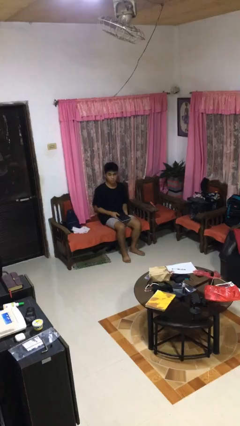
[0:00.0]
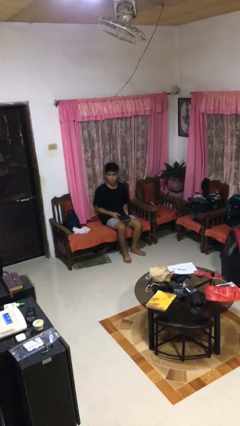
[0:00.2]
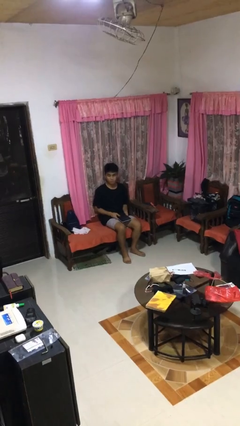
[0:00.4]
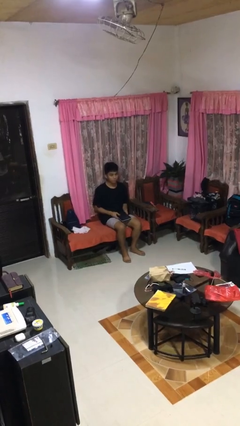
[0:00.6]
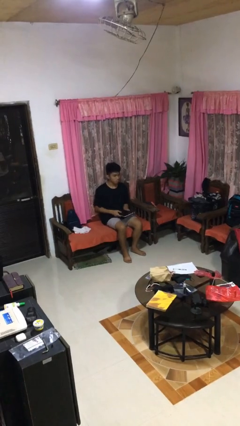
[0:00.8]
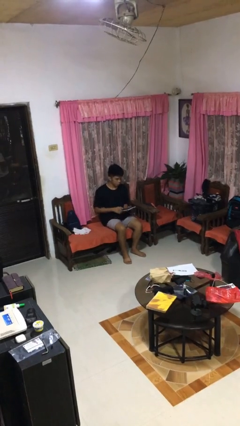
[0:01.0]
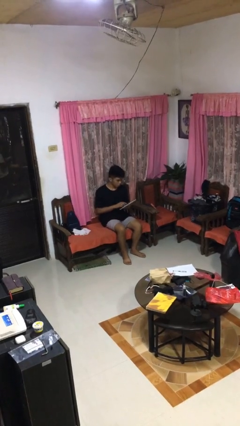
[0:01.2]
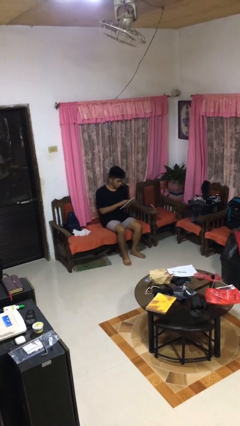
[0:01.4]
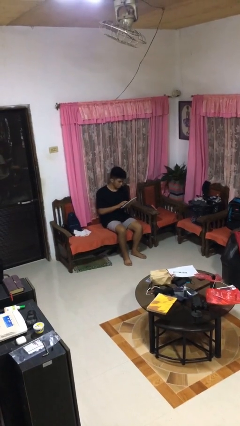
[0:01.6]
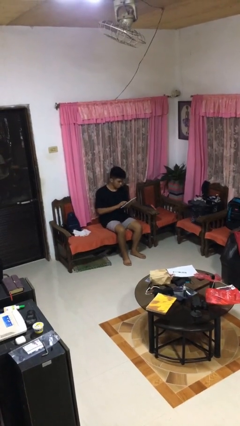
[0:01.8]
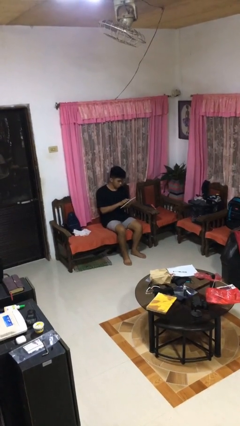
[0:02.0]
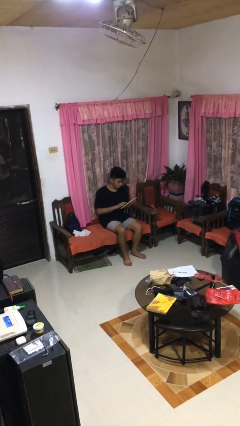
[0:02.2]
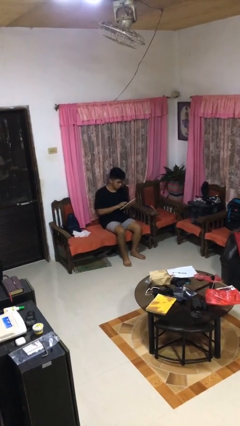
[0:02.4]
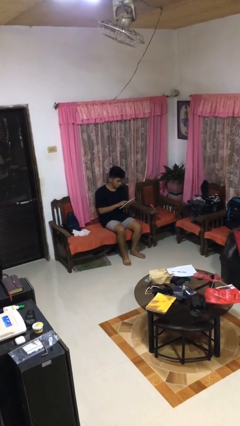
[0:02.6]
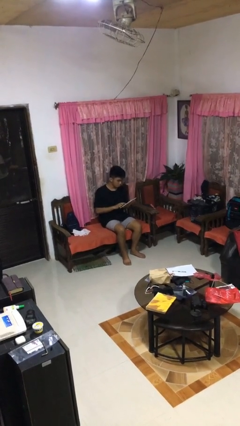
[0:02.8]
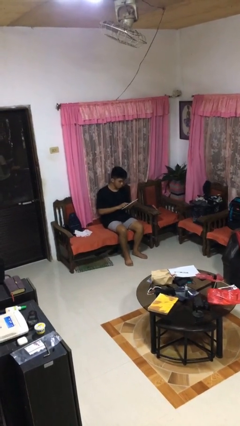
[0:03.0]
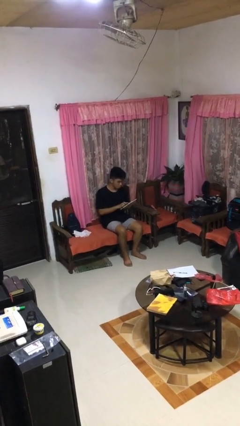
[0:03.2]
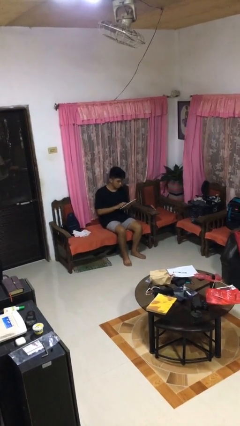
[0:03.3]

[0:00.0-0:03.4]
person interacts with tablet

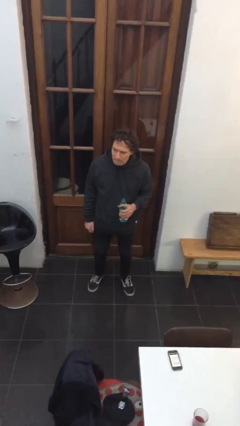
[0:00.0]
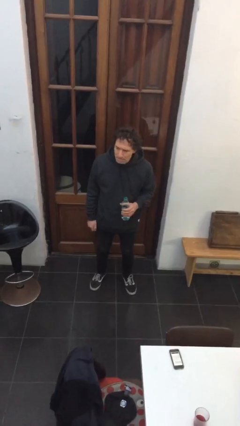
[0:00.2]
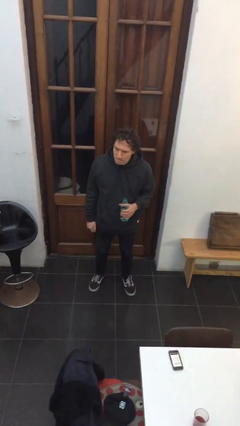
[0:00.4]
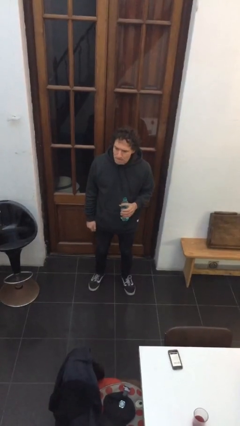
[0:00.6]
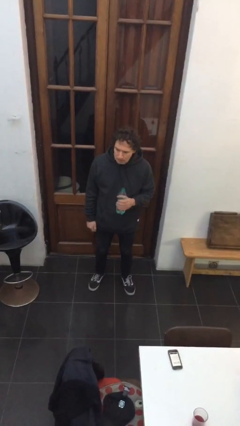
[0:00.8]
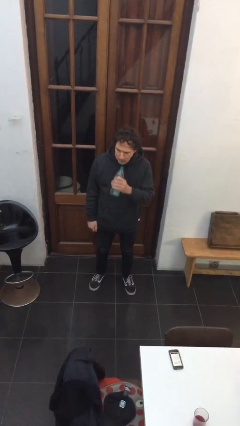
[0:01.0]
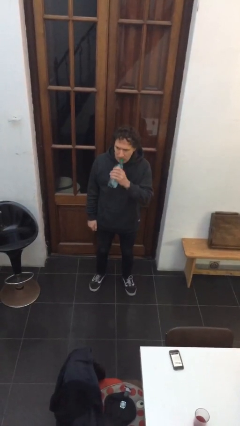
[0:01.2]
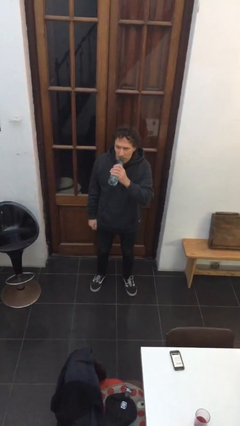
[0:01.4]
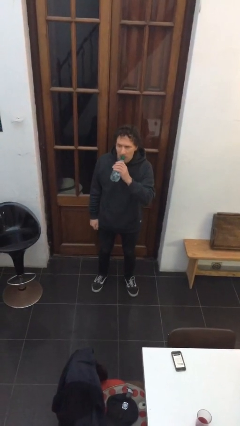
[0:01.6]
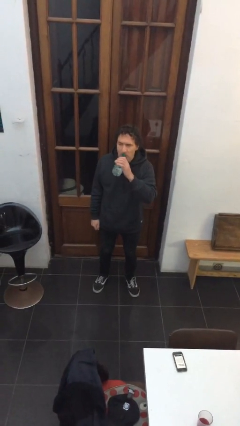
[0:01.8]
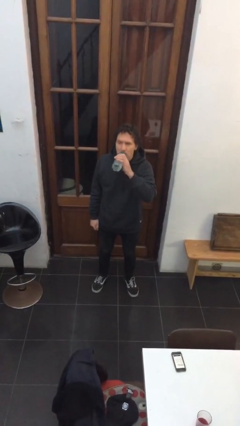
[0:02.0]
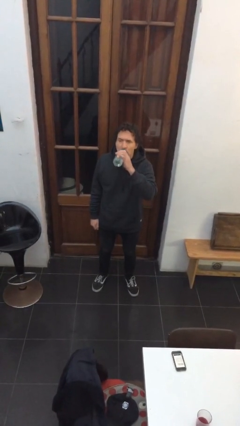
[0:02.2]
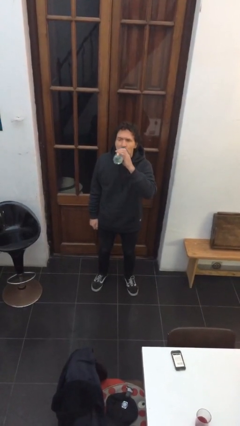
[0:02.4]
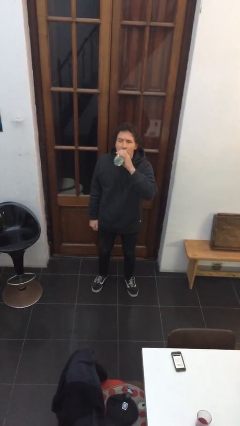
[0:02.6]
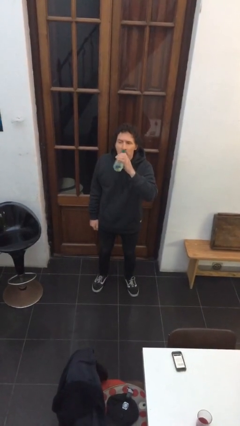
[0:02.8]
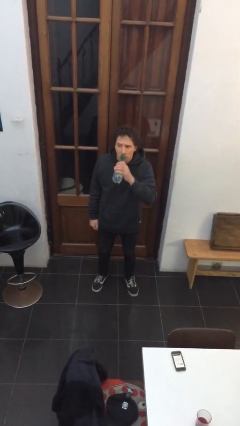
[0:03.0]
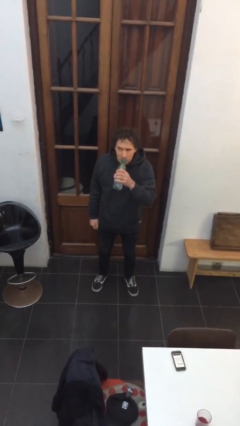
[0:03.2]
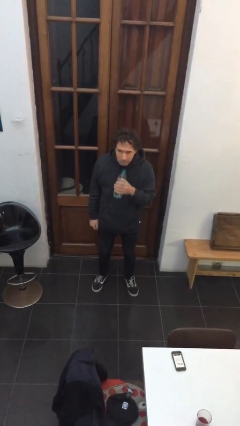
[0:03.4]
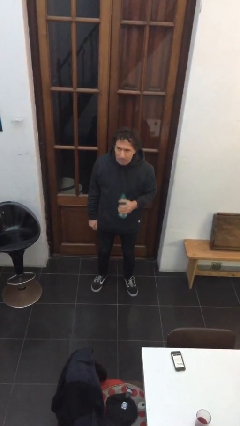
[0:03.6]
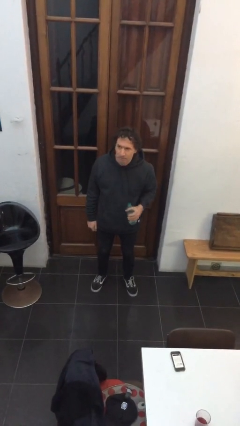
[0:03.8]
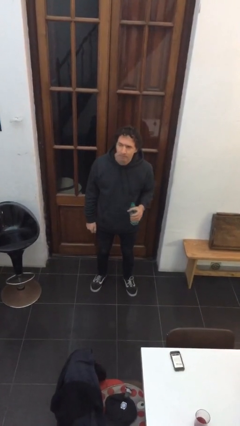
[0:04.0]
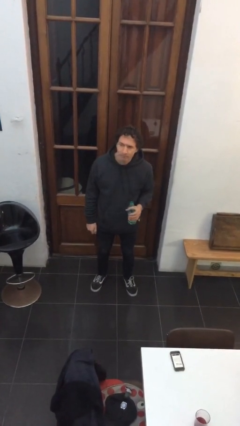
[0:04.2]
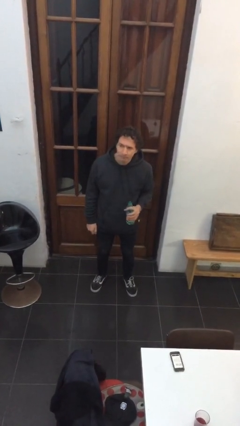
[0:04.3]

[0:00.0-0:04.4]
person drinks from bottle

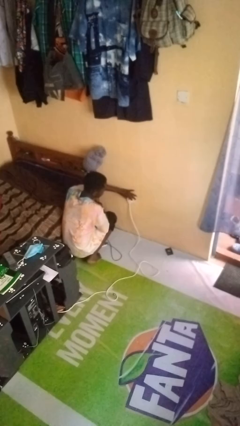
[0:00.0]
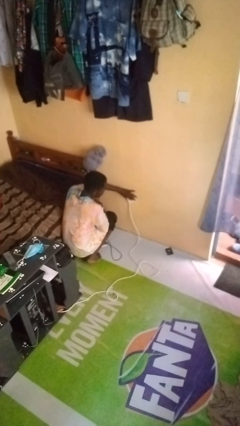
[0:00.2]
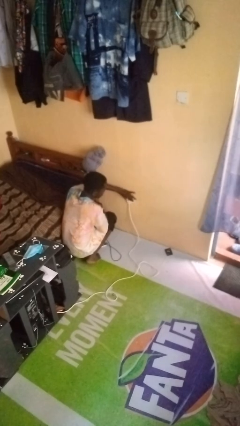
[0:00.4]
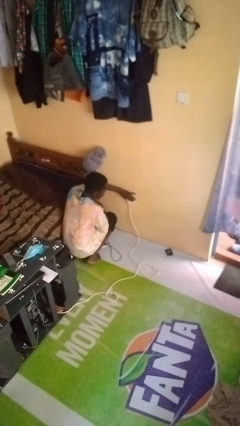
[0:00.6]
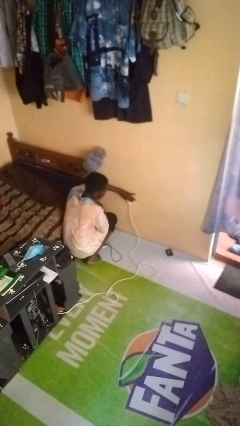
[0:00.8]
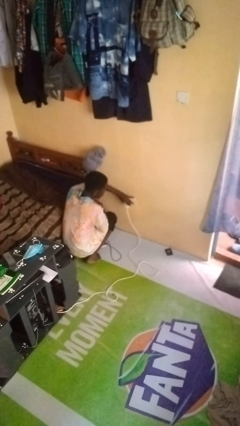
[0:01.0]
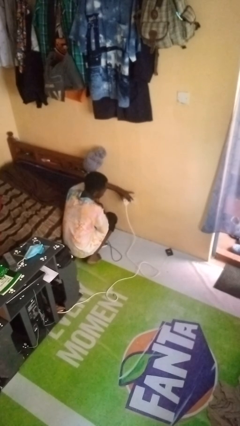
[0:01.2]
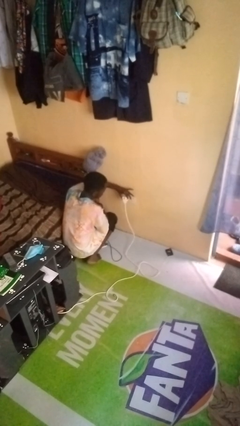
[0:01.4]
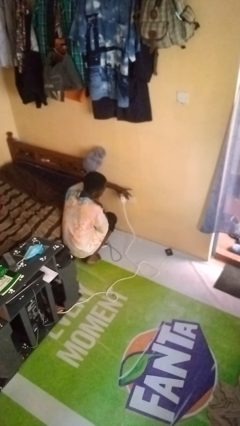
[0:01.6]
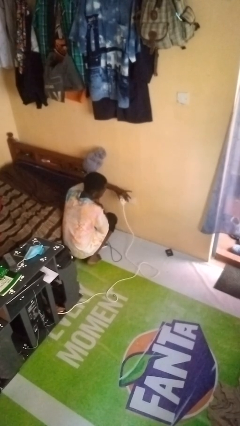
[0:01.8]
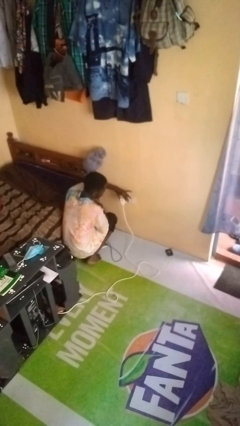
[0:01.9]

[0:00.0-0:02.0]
person unplugs from electrical socket

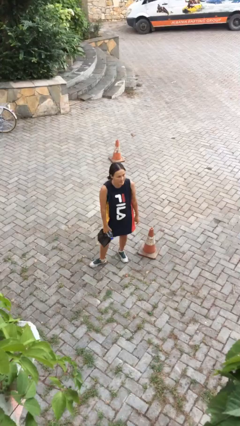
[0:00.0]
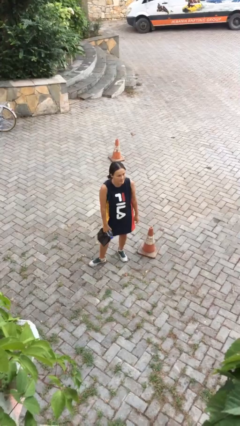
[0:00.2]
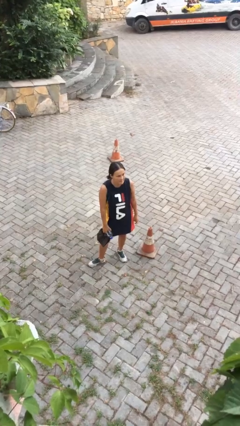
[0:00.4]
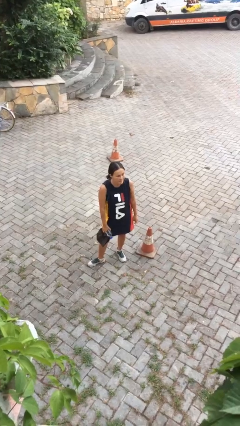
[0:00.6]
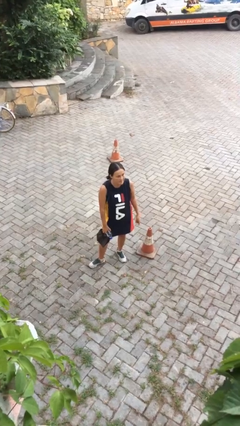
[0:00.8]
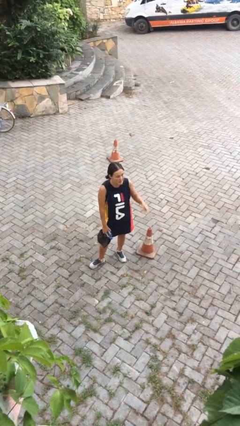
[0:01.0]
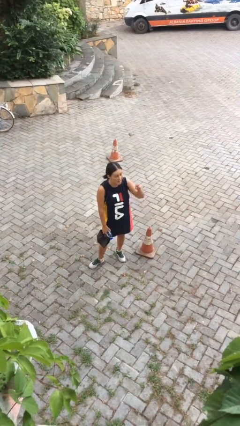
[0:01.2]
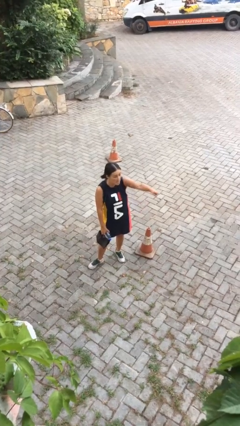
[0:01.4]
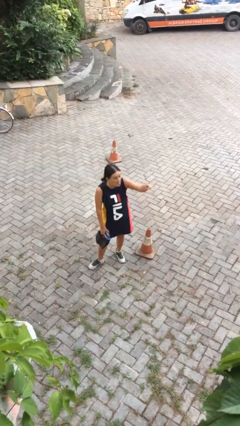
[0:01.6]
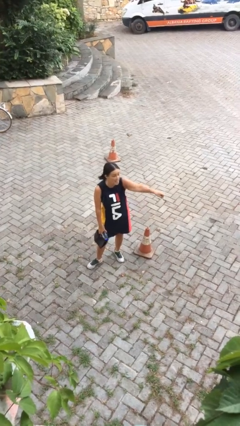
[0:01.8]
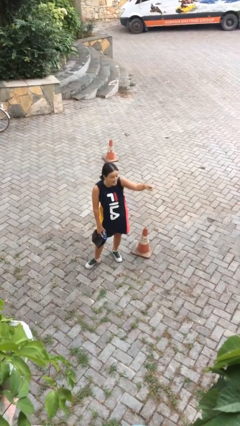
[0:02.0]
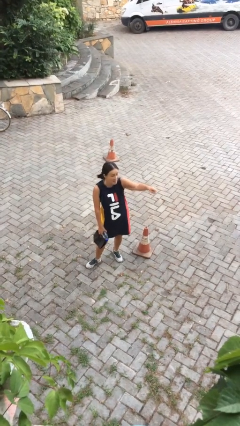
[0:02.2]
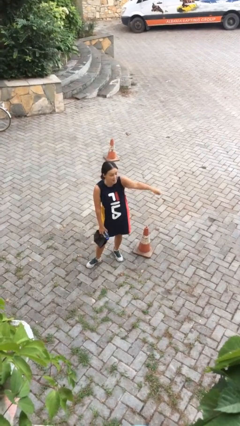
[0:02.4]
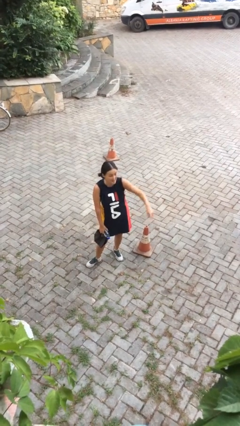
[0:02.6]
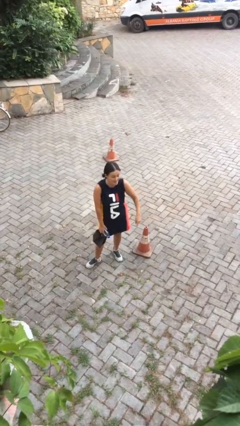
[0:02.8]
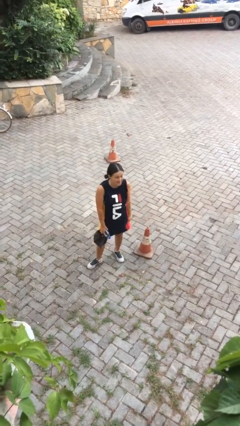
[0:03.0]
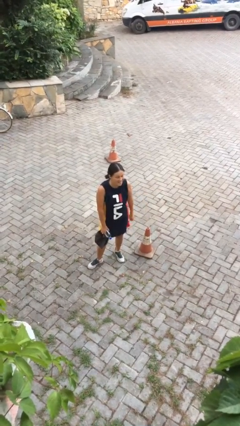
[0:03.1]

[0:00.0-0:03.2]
person points at person

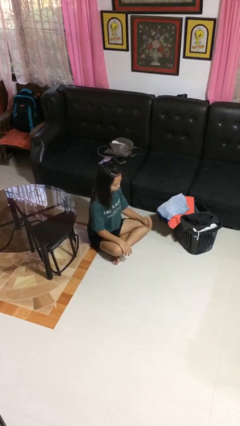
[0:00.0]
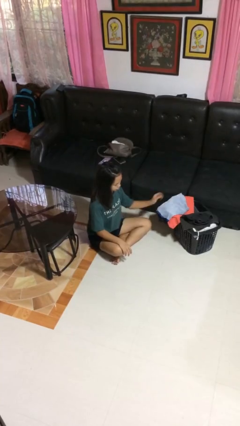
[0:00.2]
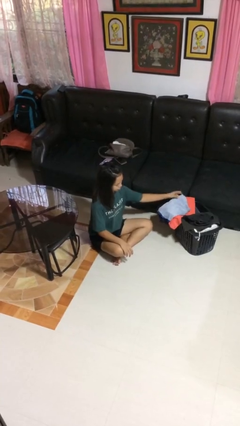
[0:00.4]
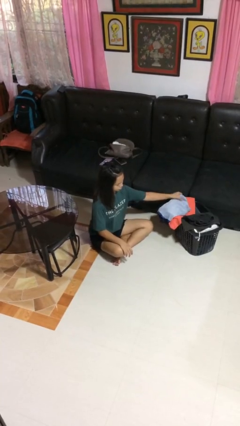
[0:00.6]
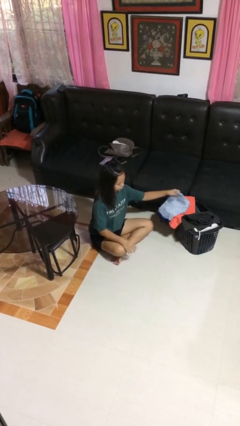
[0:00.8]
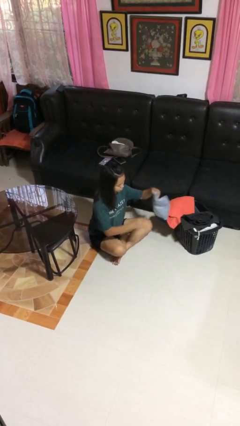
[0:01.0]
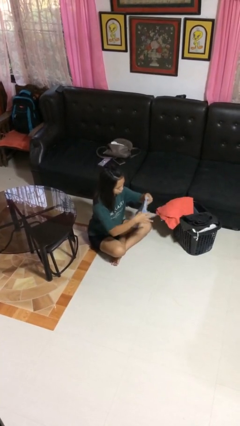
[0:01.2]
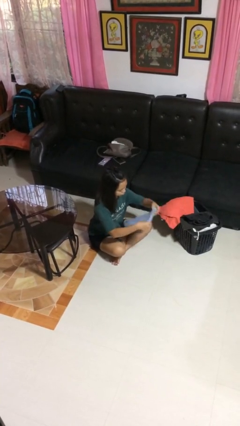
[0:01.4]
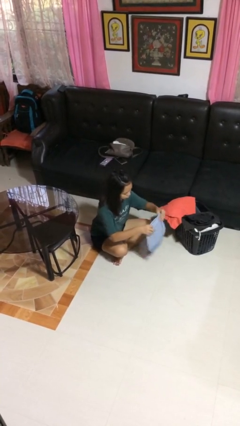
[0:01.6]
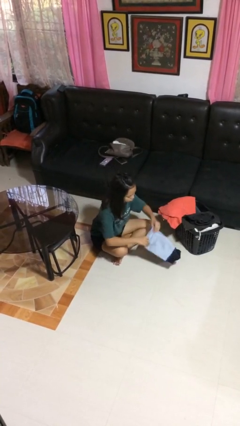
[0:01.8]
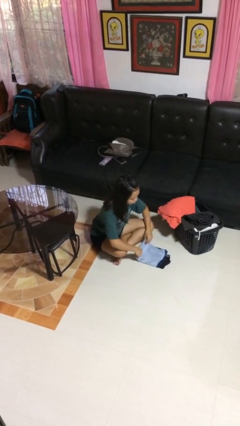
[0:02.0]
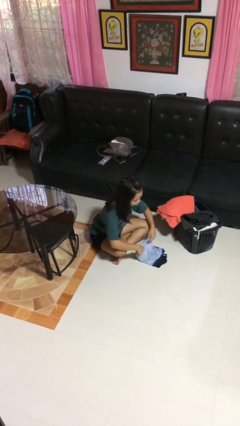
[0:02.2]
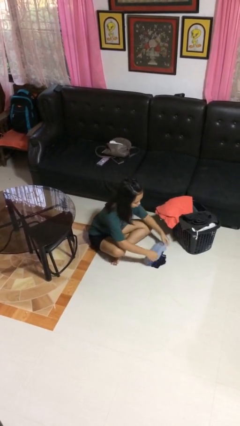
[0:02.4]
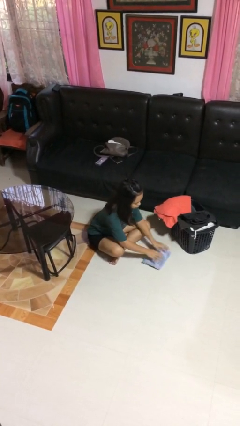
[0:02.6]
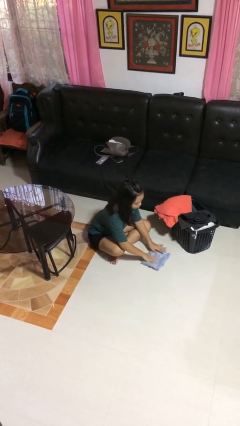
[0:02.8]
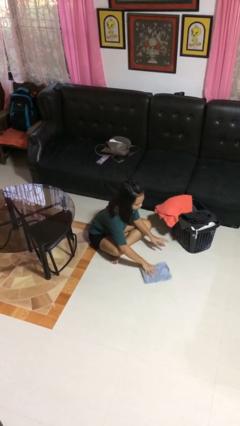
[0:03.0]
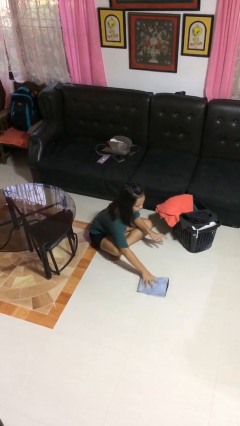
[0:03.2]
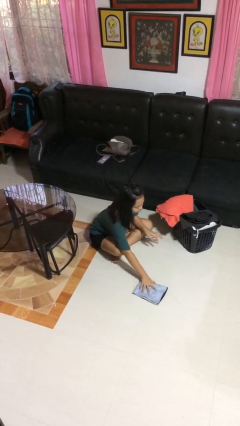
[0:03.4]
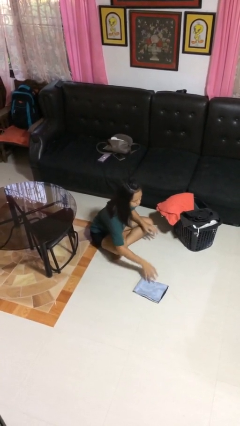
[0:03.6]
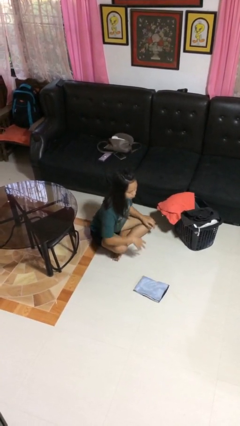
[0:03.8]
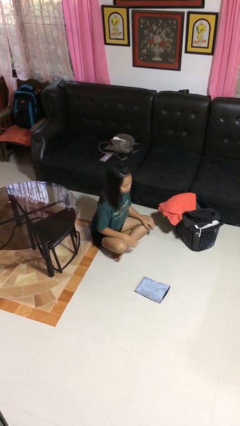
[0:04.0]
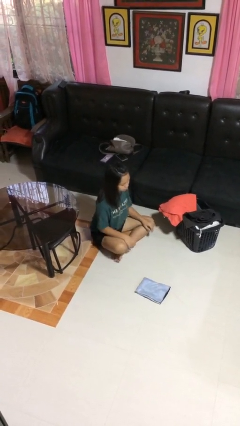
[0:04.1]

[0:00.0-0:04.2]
person folds shirt

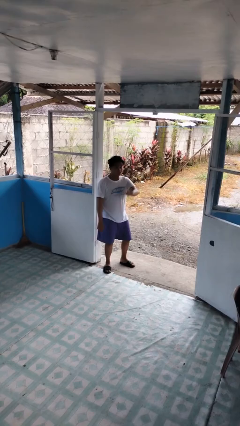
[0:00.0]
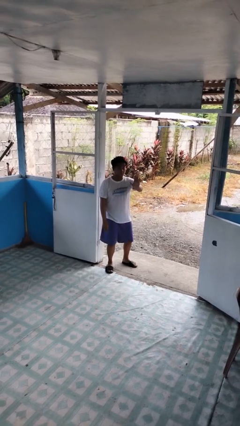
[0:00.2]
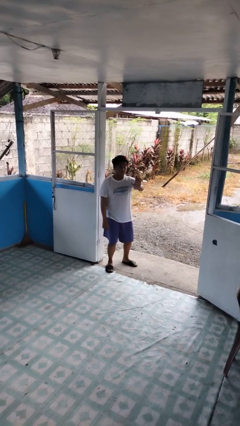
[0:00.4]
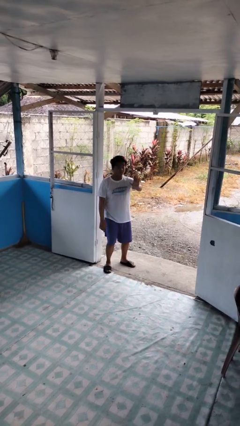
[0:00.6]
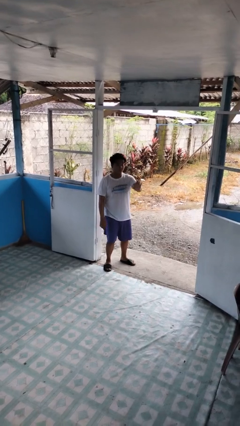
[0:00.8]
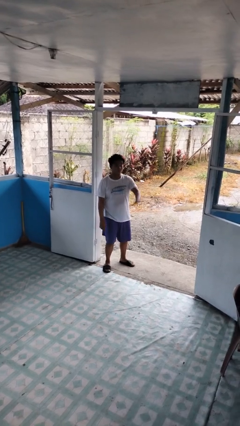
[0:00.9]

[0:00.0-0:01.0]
person gestures stop
